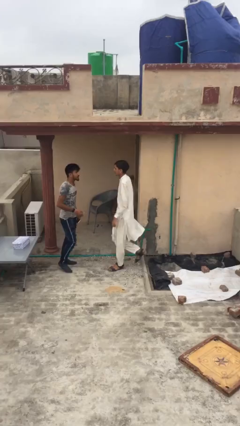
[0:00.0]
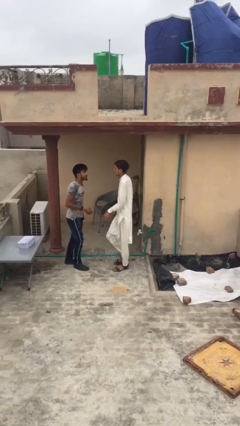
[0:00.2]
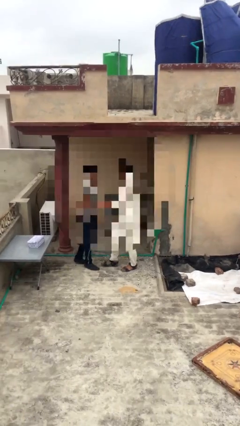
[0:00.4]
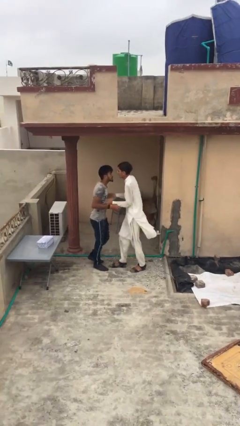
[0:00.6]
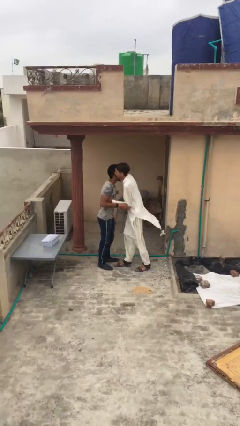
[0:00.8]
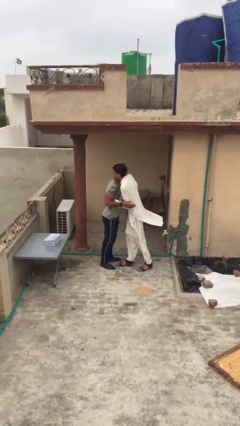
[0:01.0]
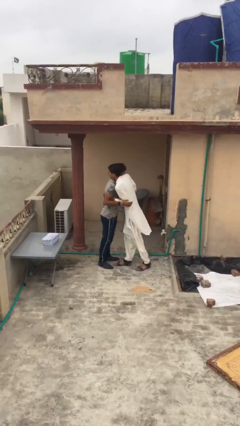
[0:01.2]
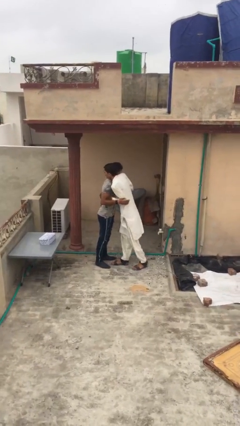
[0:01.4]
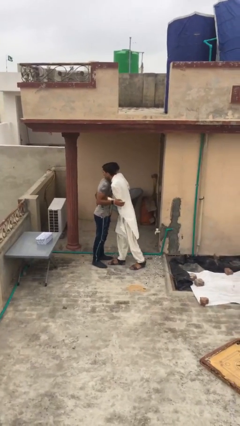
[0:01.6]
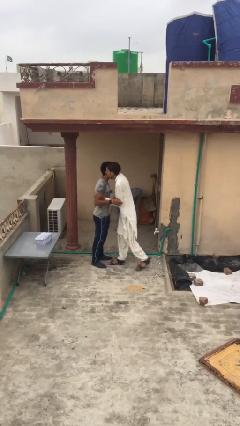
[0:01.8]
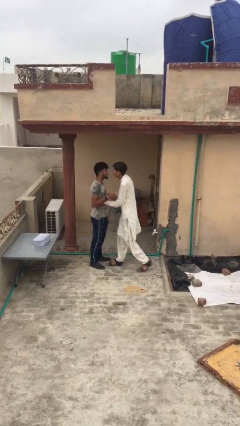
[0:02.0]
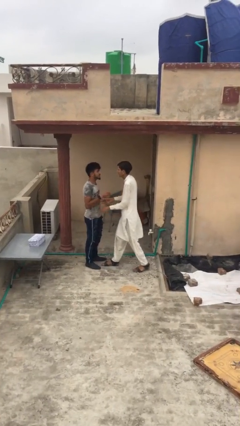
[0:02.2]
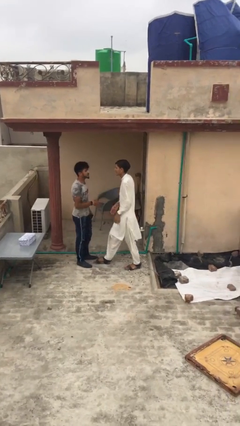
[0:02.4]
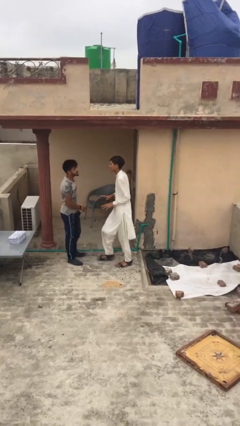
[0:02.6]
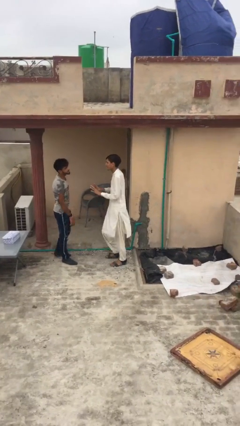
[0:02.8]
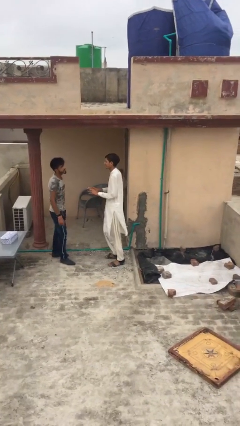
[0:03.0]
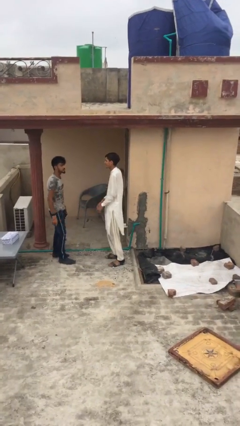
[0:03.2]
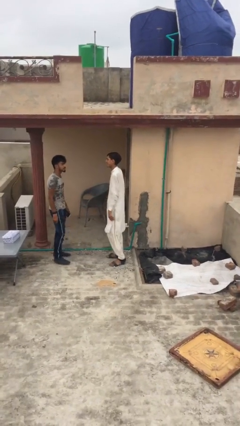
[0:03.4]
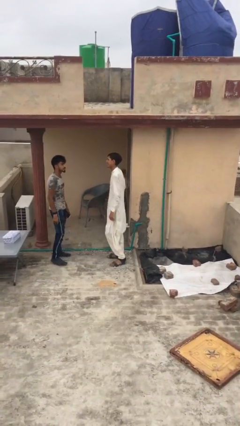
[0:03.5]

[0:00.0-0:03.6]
person embraces person

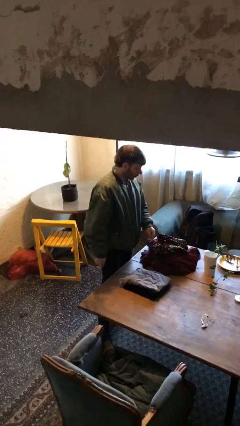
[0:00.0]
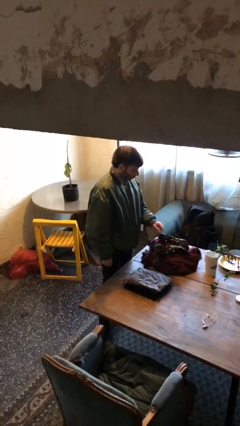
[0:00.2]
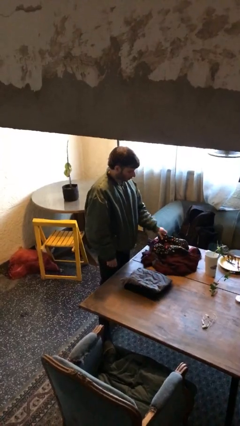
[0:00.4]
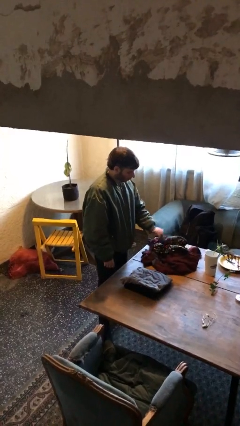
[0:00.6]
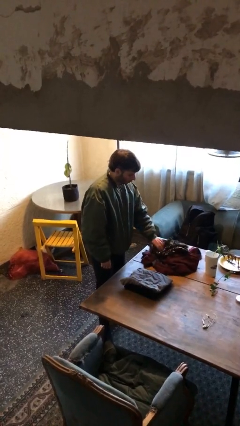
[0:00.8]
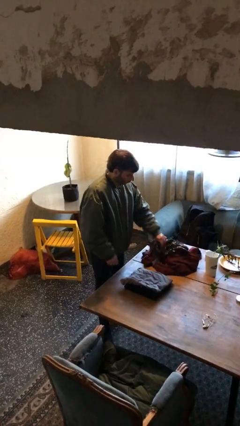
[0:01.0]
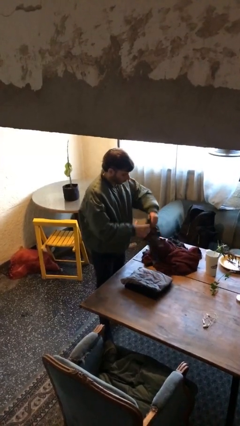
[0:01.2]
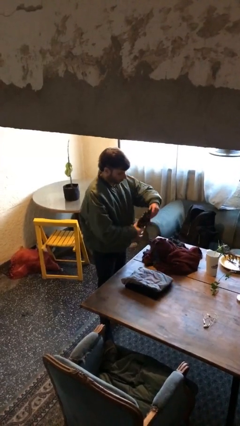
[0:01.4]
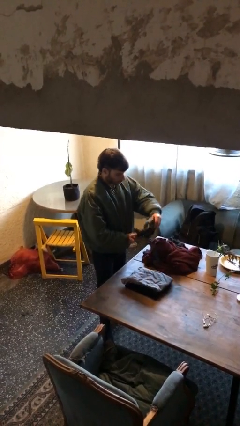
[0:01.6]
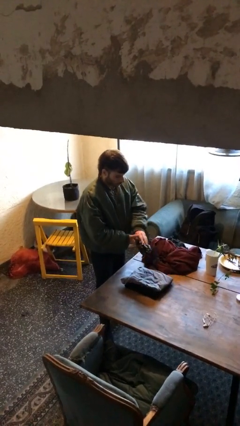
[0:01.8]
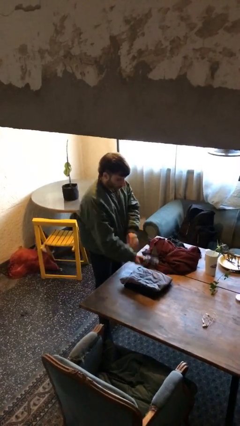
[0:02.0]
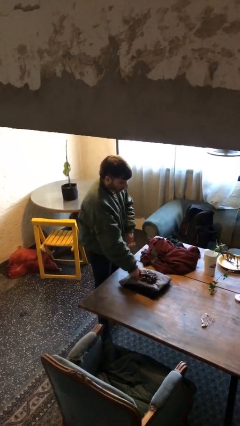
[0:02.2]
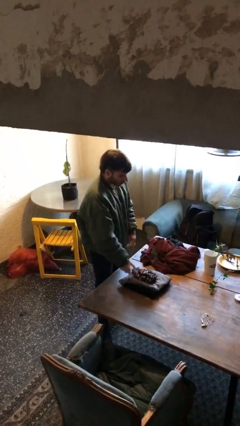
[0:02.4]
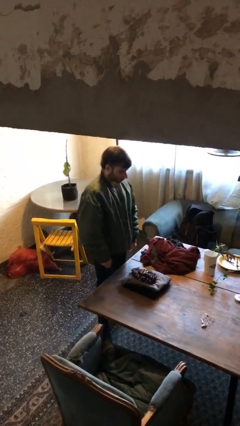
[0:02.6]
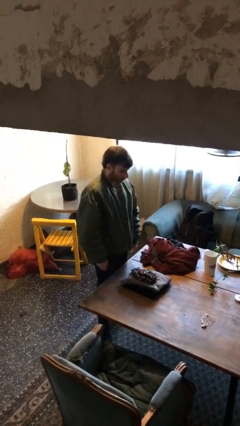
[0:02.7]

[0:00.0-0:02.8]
person folds socks

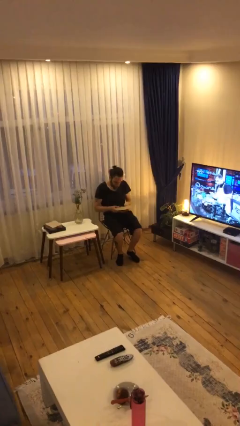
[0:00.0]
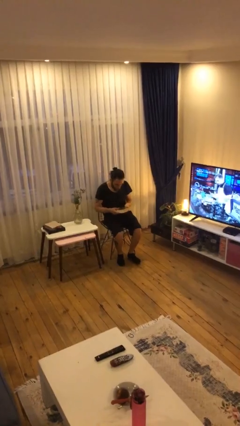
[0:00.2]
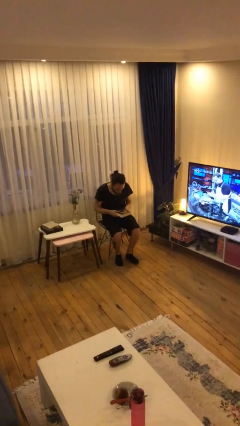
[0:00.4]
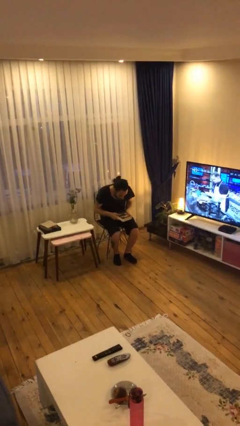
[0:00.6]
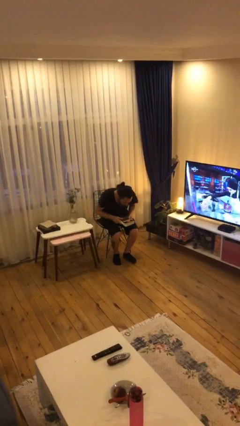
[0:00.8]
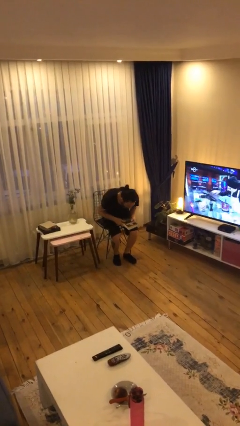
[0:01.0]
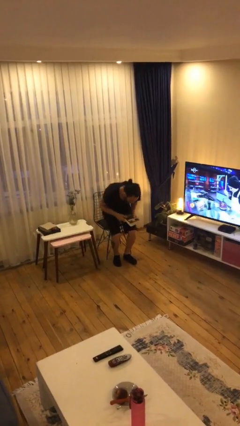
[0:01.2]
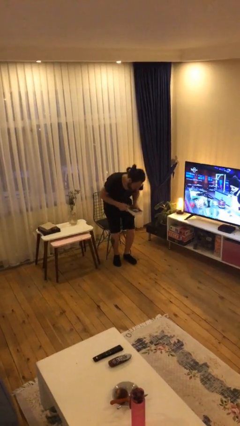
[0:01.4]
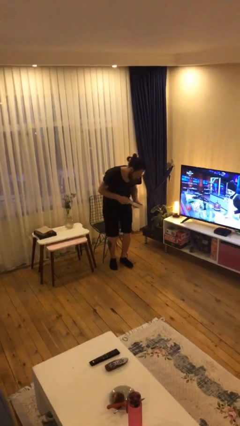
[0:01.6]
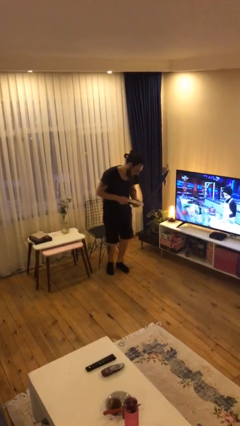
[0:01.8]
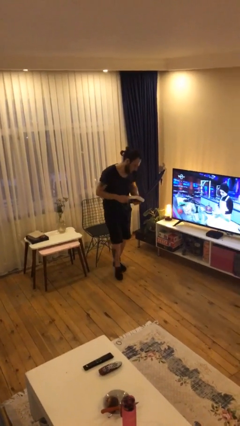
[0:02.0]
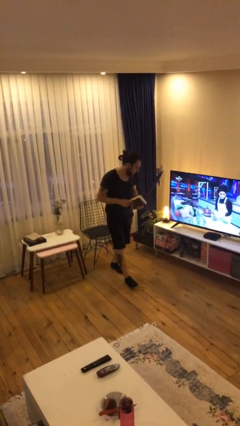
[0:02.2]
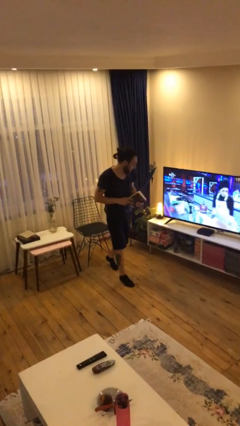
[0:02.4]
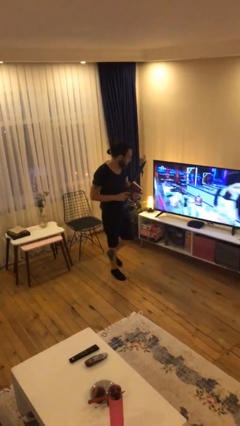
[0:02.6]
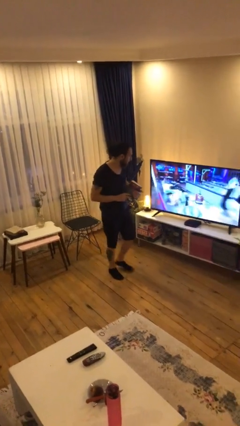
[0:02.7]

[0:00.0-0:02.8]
person stands up

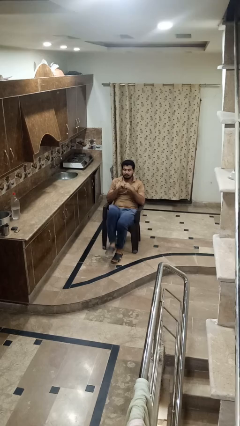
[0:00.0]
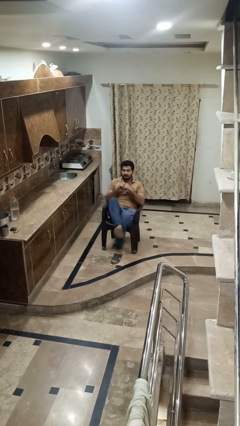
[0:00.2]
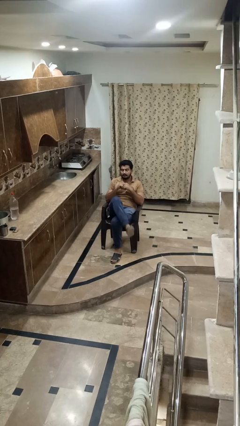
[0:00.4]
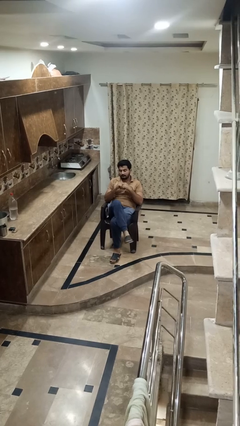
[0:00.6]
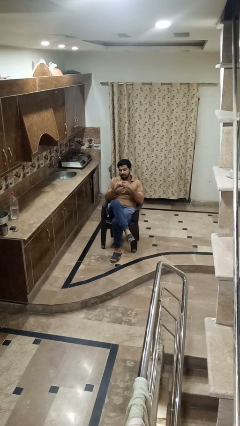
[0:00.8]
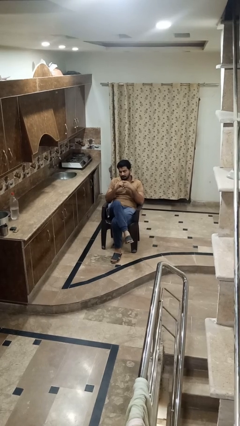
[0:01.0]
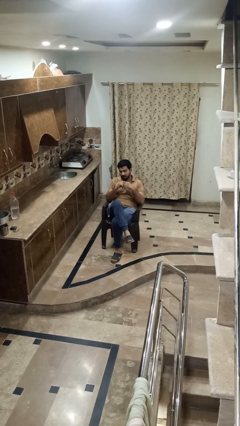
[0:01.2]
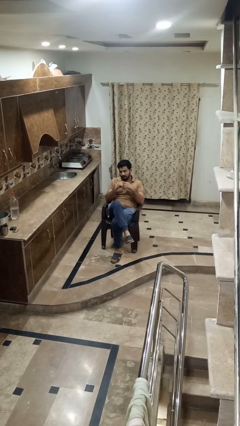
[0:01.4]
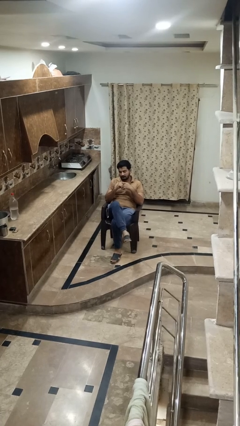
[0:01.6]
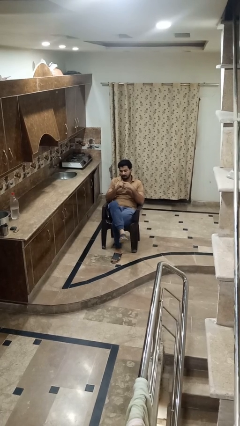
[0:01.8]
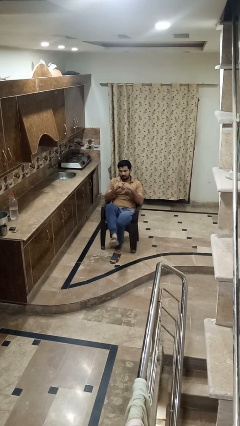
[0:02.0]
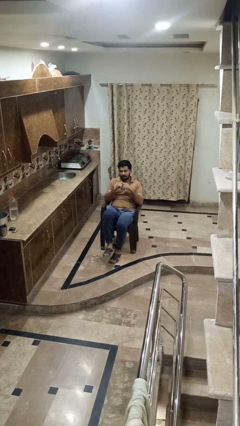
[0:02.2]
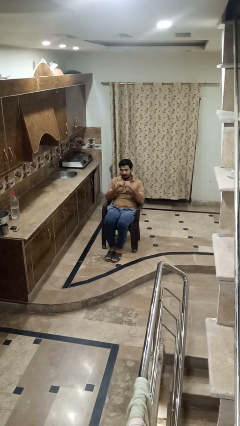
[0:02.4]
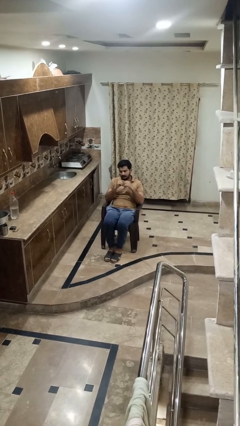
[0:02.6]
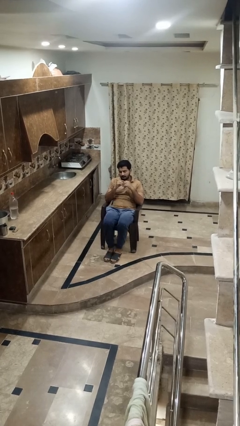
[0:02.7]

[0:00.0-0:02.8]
person crosses legs

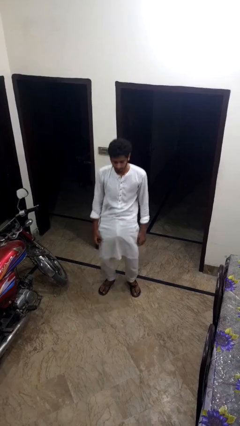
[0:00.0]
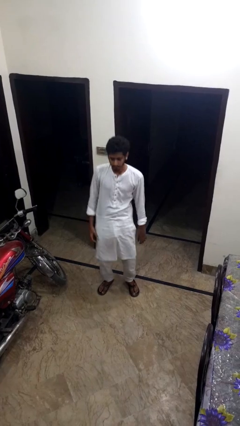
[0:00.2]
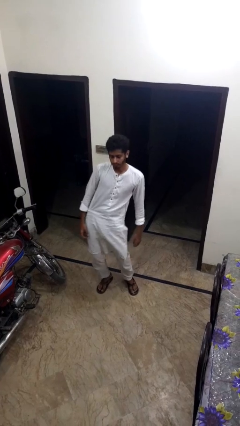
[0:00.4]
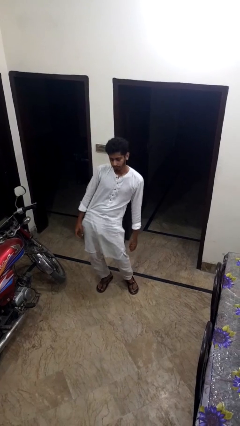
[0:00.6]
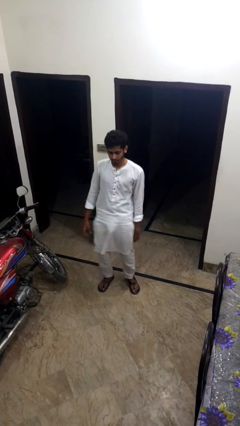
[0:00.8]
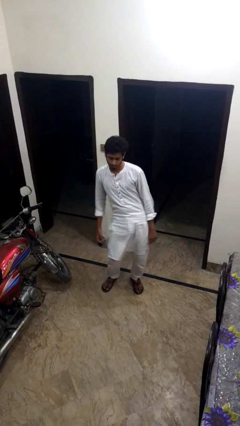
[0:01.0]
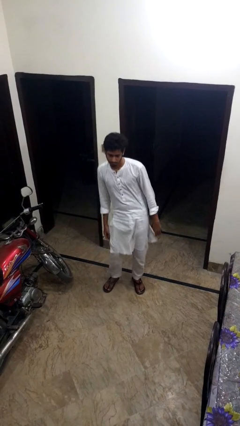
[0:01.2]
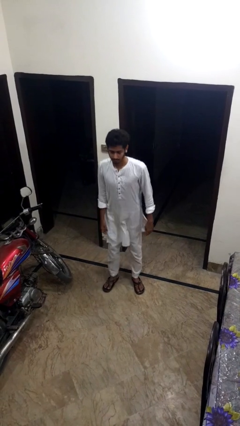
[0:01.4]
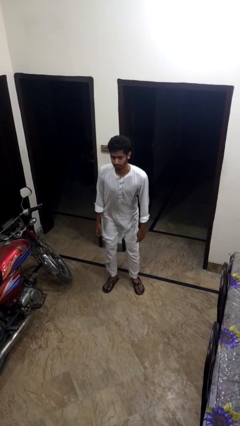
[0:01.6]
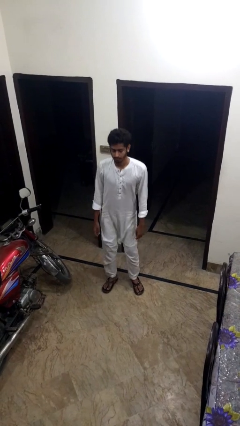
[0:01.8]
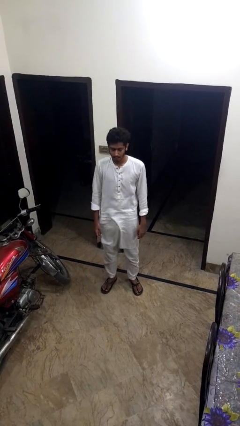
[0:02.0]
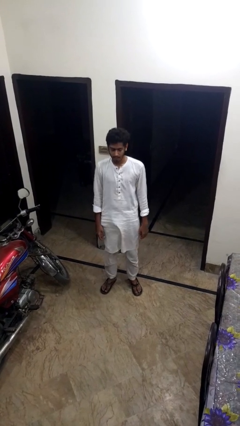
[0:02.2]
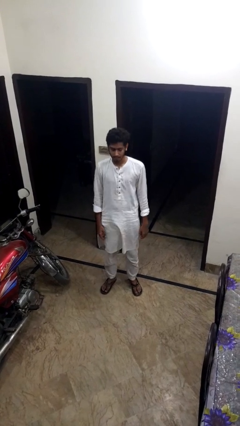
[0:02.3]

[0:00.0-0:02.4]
person wiggles hips

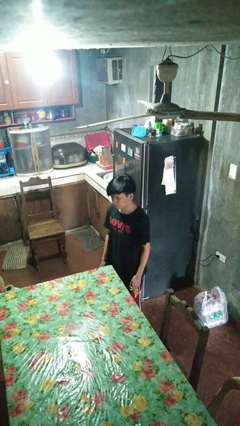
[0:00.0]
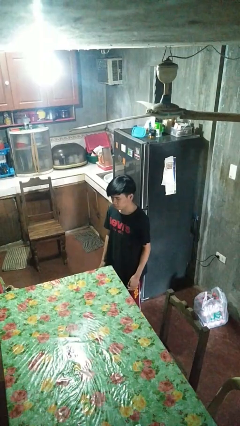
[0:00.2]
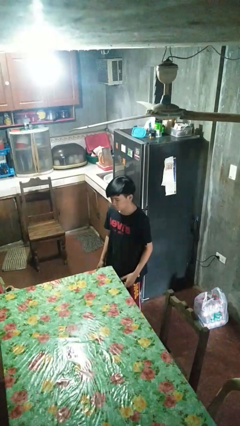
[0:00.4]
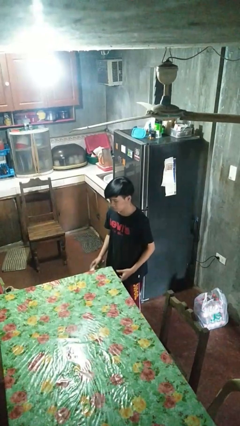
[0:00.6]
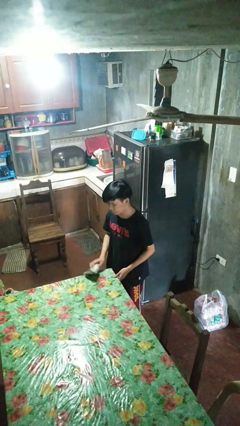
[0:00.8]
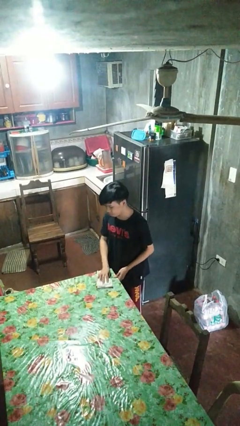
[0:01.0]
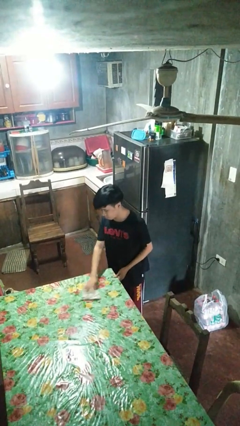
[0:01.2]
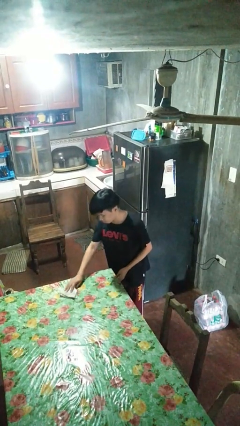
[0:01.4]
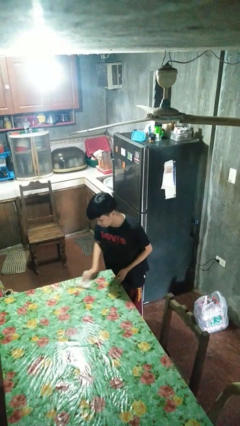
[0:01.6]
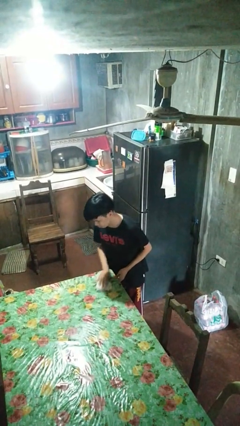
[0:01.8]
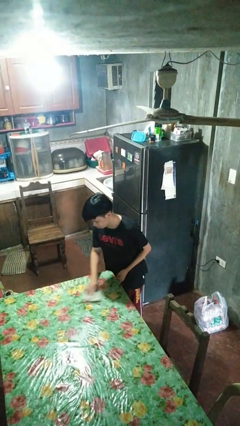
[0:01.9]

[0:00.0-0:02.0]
person cleans table with rag

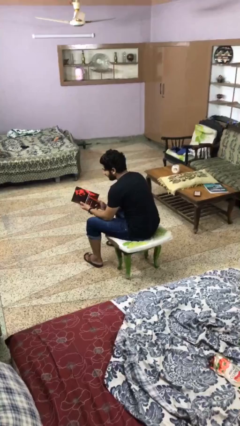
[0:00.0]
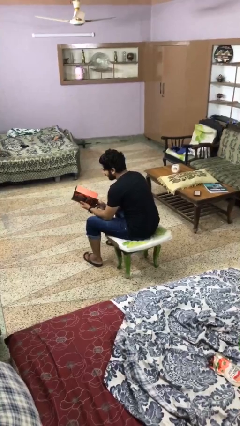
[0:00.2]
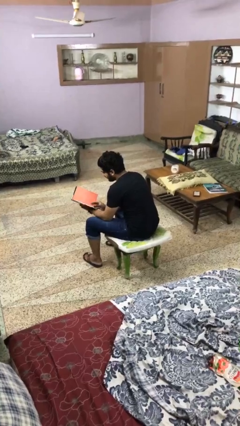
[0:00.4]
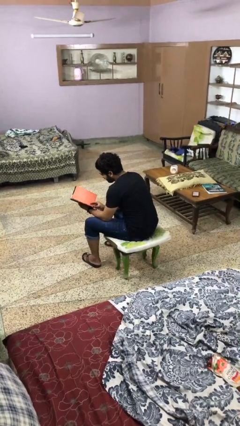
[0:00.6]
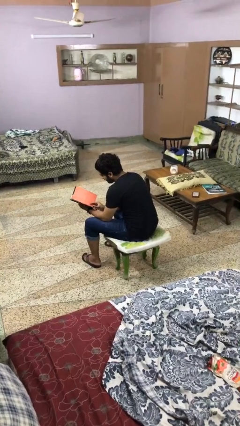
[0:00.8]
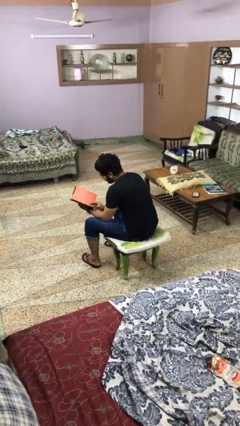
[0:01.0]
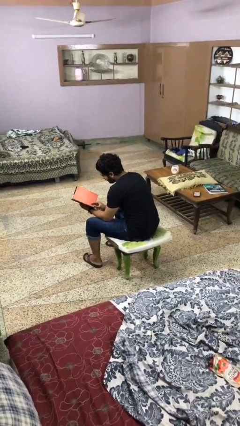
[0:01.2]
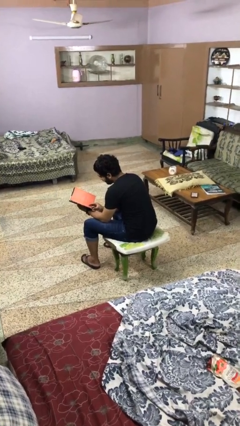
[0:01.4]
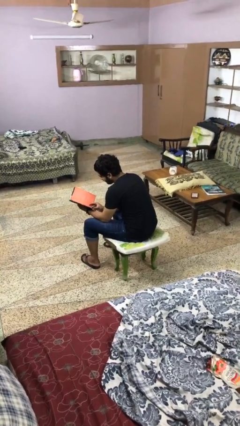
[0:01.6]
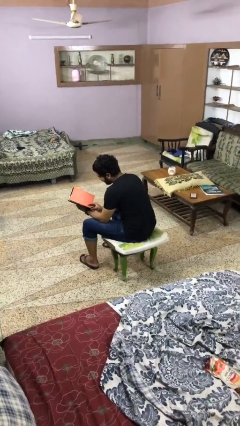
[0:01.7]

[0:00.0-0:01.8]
person reads magazine
